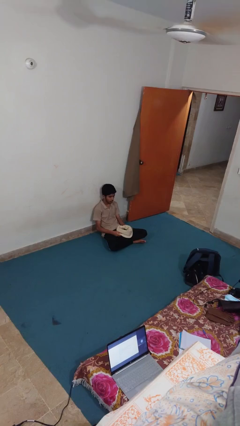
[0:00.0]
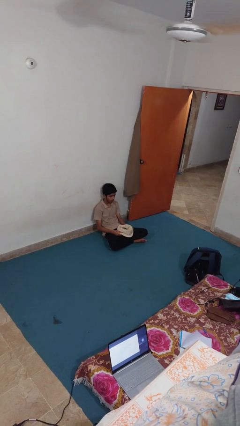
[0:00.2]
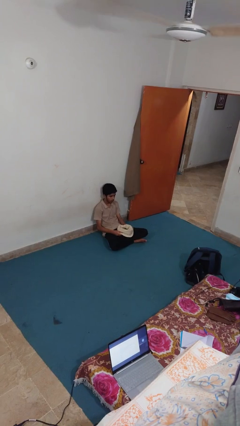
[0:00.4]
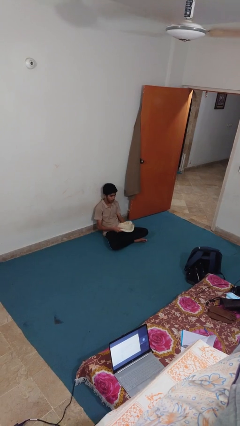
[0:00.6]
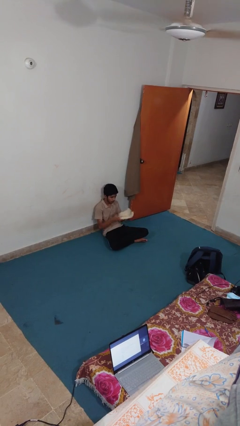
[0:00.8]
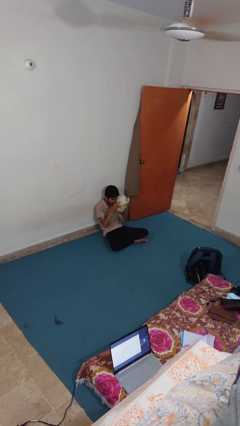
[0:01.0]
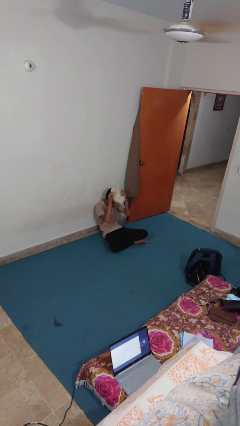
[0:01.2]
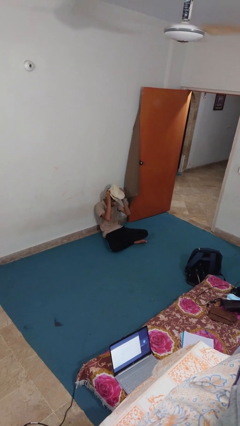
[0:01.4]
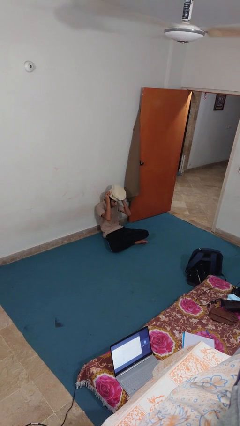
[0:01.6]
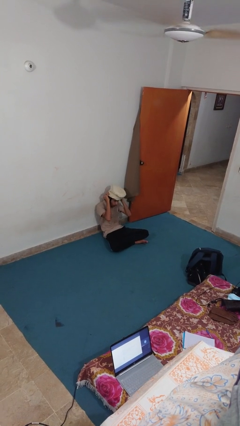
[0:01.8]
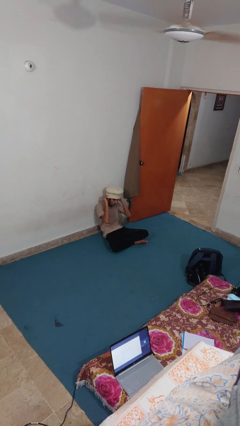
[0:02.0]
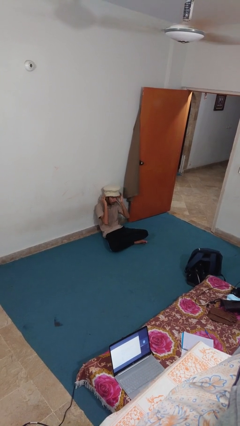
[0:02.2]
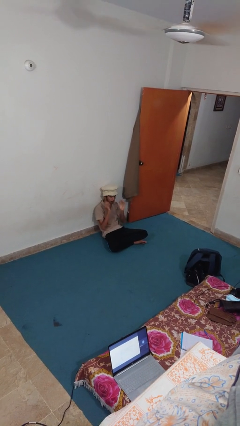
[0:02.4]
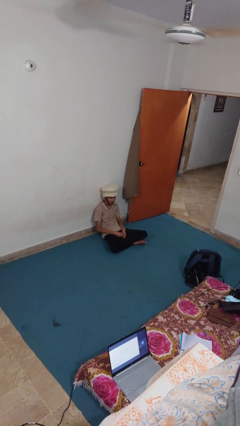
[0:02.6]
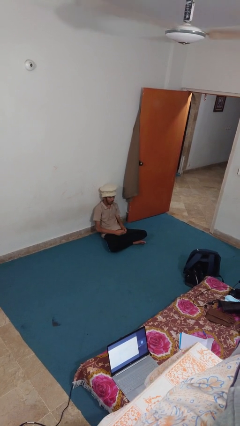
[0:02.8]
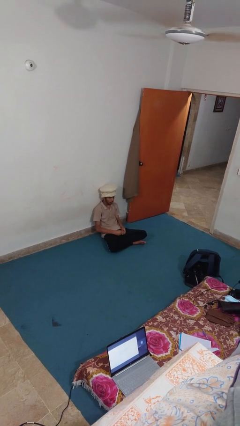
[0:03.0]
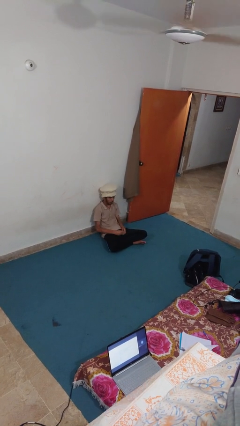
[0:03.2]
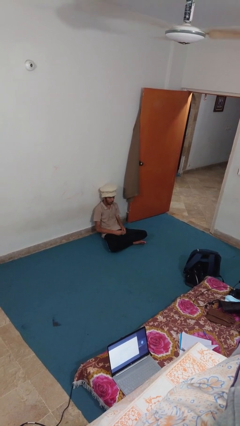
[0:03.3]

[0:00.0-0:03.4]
person puts on hat

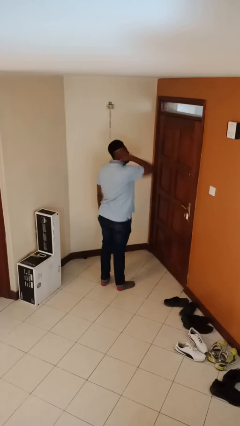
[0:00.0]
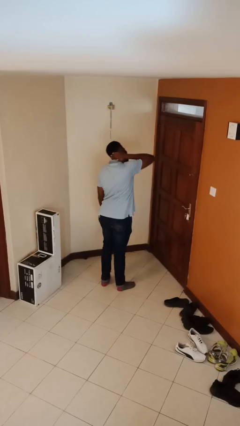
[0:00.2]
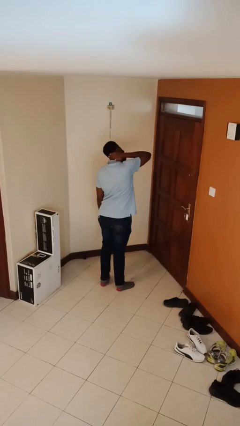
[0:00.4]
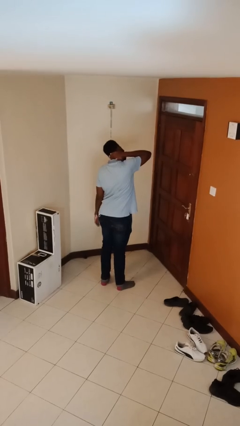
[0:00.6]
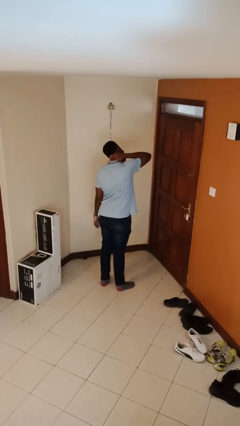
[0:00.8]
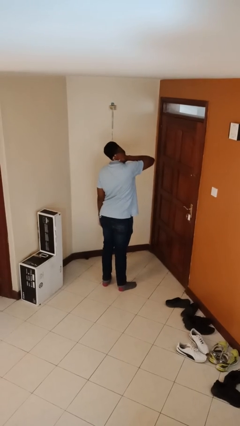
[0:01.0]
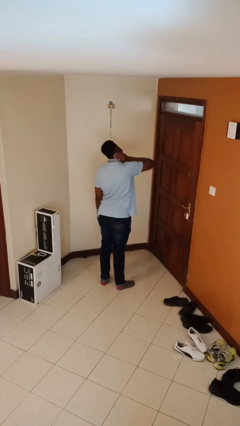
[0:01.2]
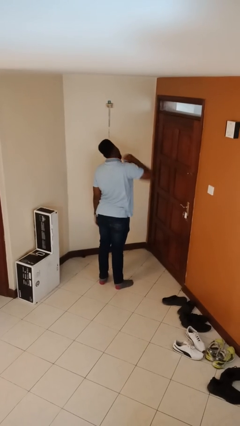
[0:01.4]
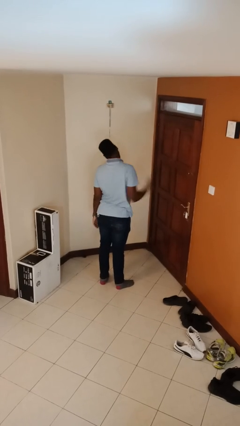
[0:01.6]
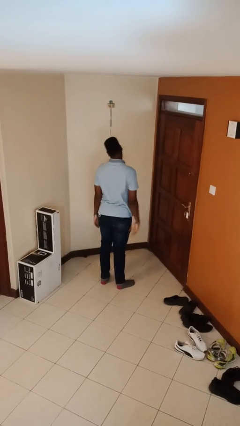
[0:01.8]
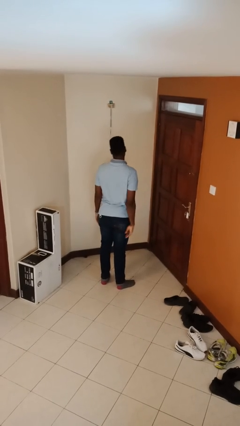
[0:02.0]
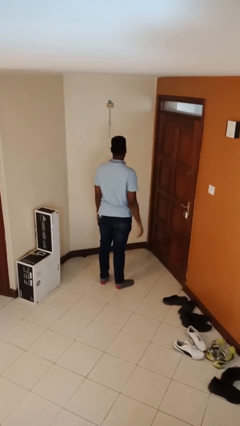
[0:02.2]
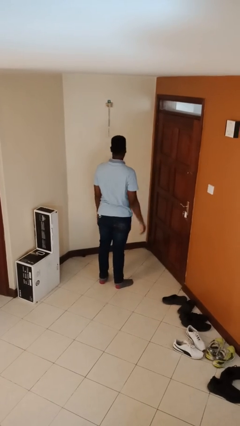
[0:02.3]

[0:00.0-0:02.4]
person swats bug

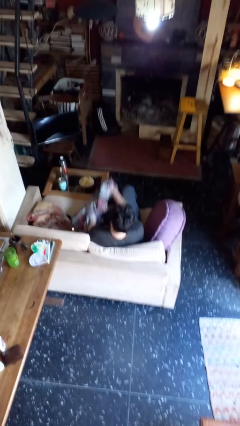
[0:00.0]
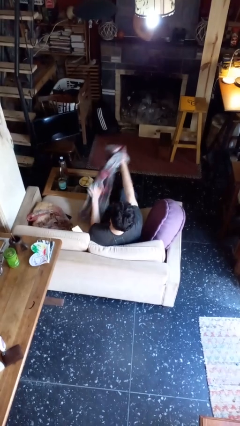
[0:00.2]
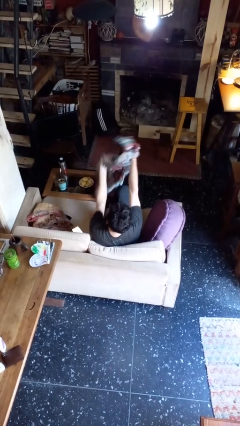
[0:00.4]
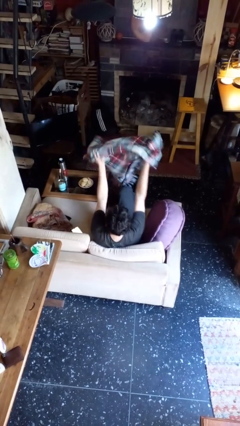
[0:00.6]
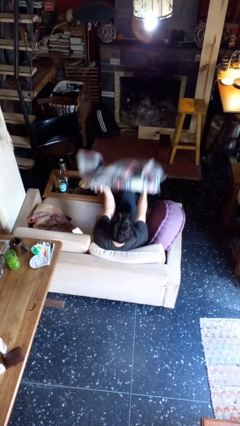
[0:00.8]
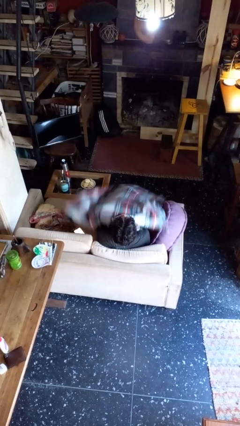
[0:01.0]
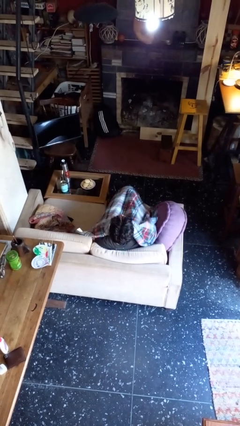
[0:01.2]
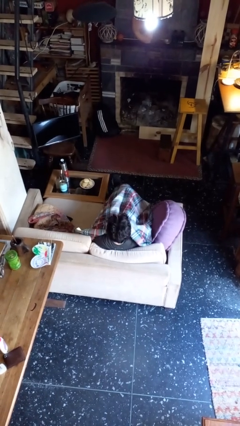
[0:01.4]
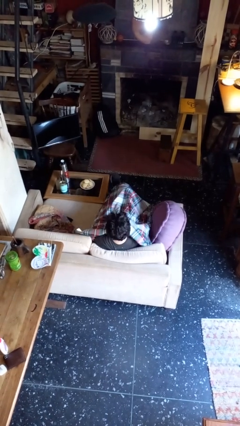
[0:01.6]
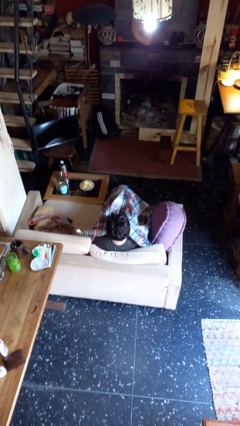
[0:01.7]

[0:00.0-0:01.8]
person covers with blanket

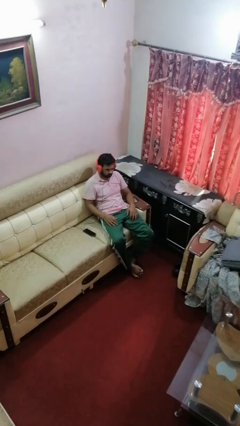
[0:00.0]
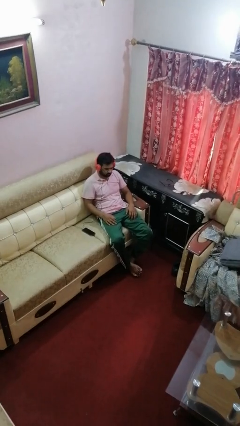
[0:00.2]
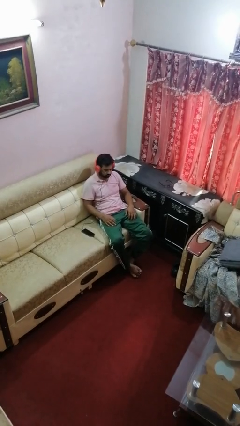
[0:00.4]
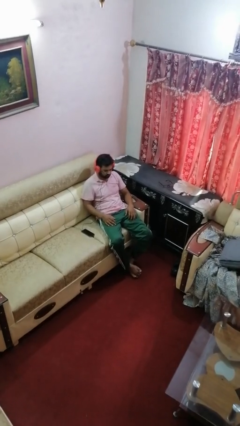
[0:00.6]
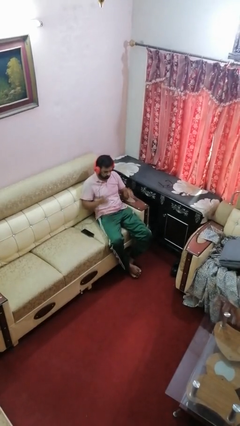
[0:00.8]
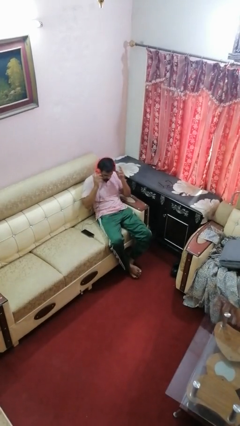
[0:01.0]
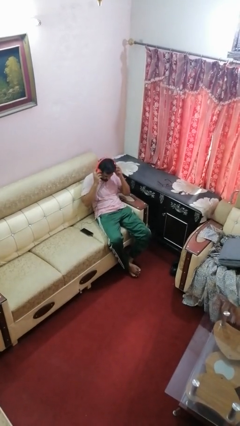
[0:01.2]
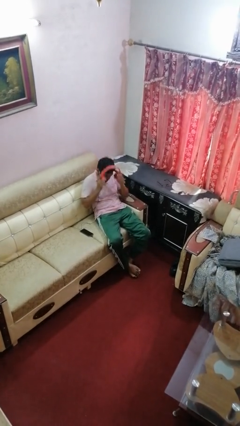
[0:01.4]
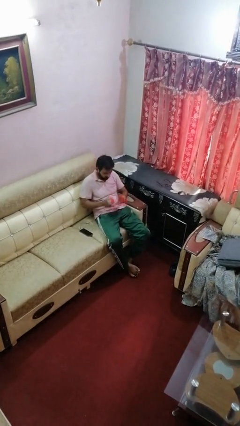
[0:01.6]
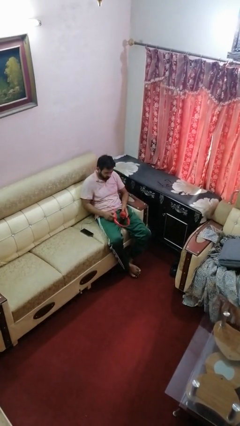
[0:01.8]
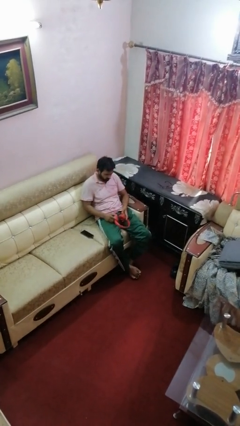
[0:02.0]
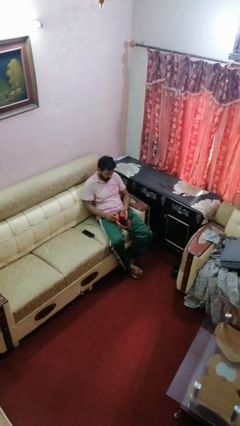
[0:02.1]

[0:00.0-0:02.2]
person takes off headphones

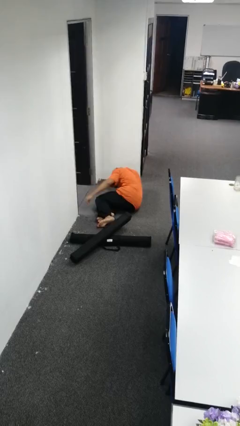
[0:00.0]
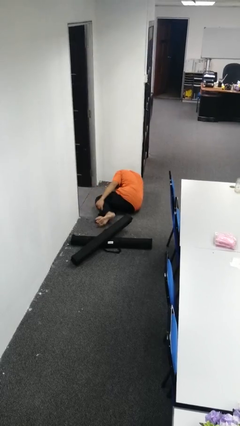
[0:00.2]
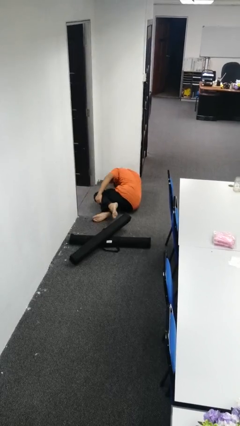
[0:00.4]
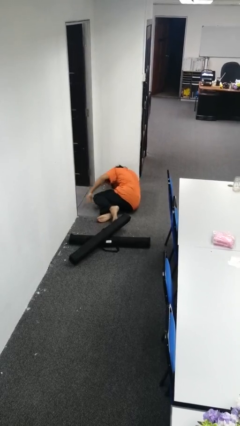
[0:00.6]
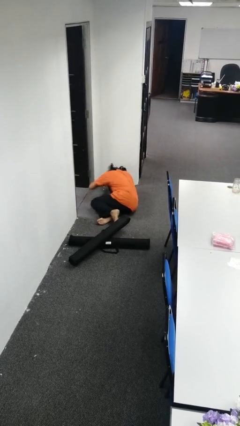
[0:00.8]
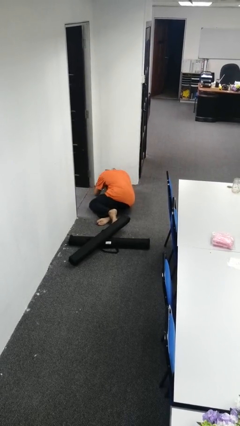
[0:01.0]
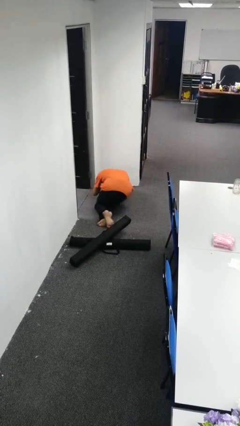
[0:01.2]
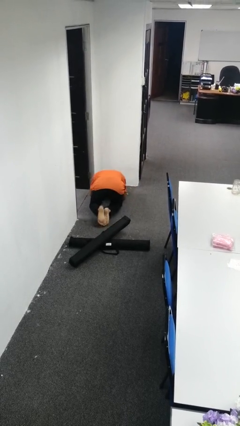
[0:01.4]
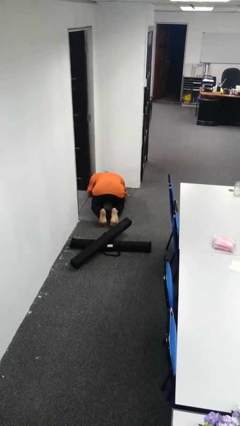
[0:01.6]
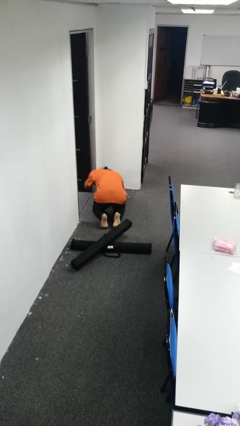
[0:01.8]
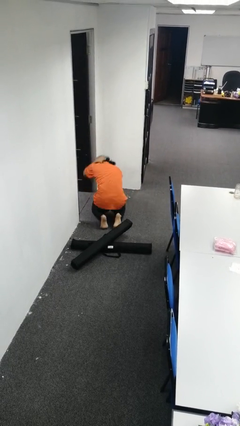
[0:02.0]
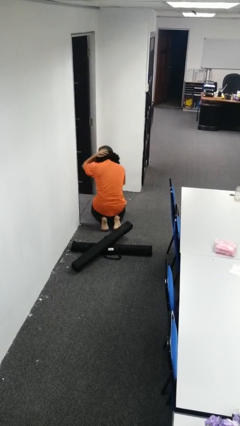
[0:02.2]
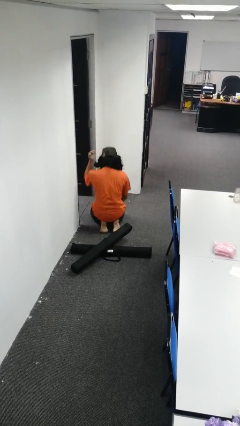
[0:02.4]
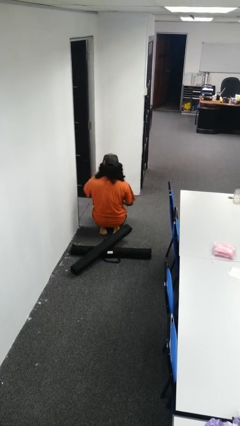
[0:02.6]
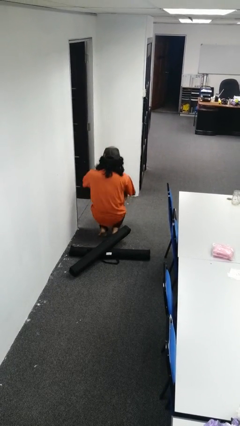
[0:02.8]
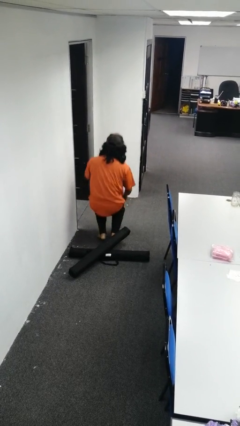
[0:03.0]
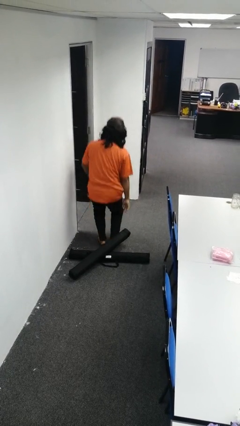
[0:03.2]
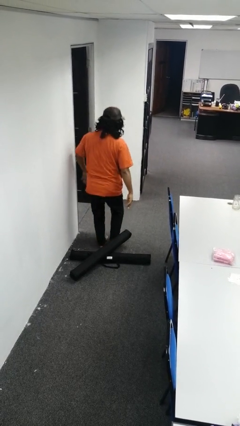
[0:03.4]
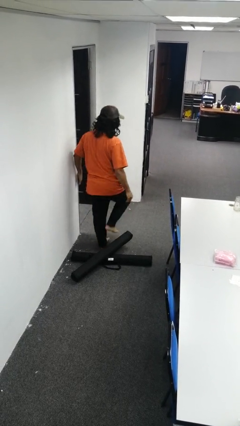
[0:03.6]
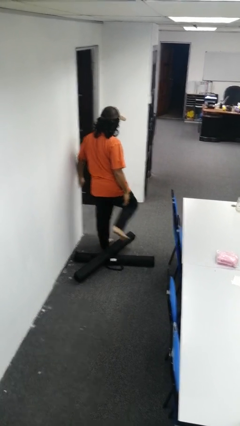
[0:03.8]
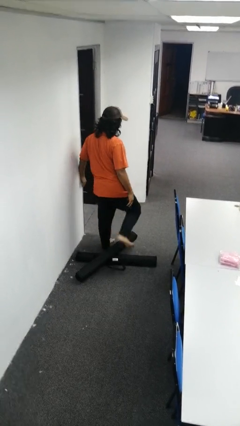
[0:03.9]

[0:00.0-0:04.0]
person stands up from floor

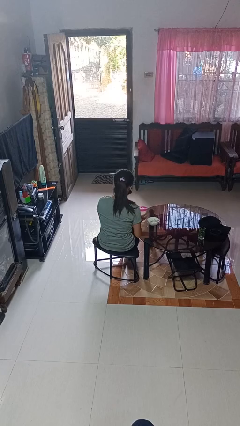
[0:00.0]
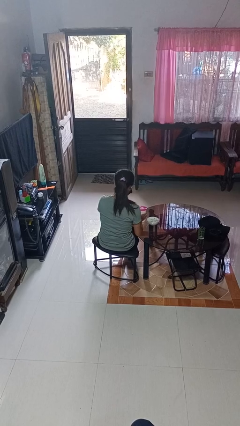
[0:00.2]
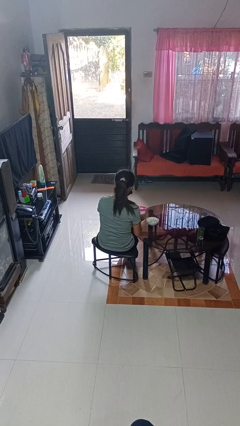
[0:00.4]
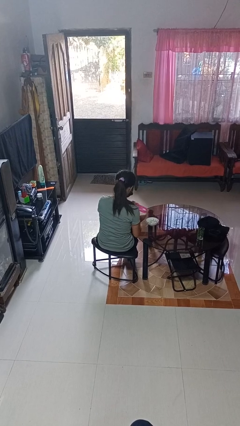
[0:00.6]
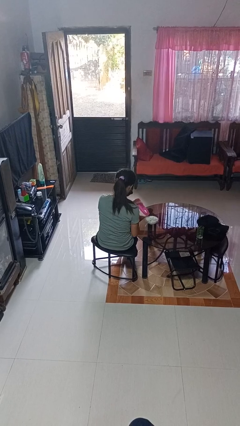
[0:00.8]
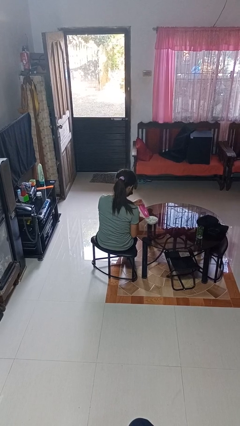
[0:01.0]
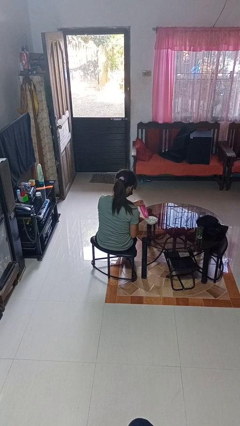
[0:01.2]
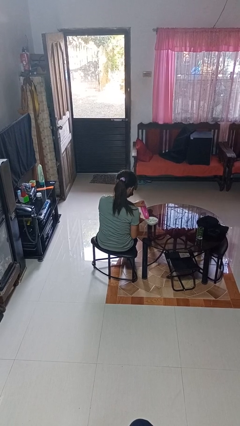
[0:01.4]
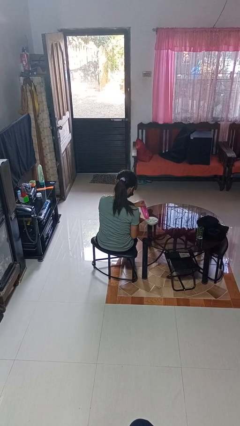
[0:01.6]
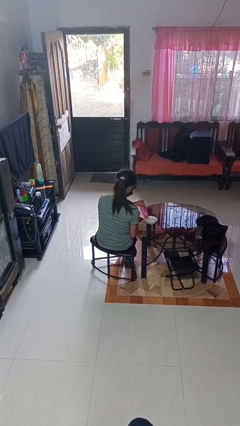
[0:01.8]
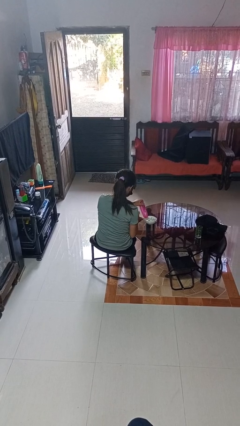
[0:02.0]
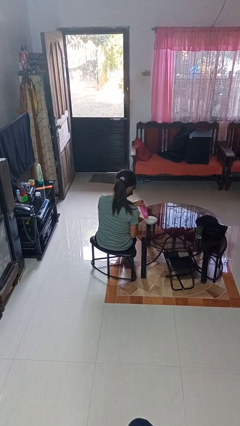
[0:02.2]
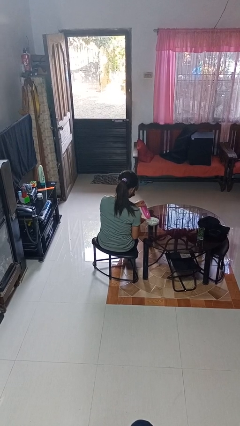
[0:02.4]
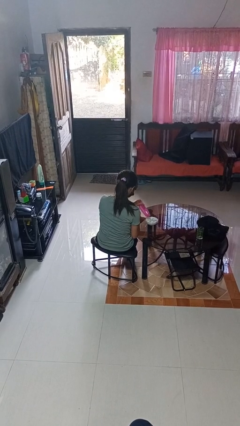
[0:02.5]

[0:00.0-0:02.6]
person pours into bowl

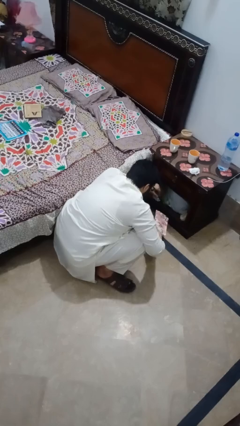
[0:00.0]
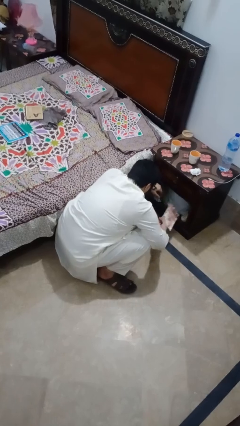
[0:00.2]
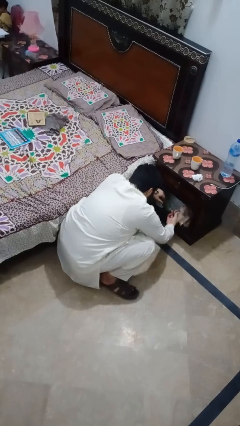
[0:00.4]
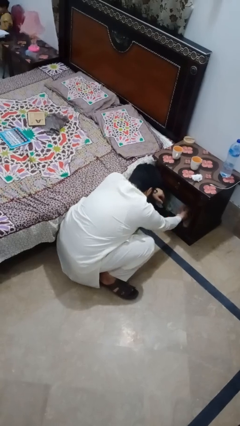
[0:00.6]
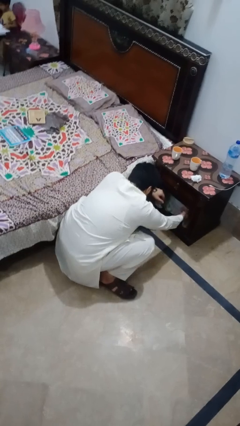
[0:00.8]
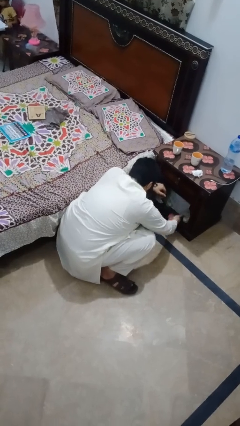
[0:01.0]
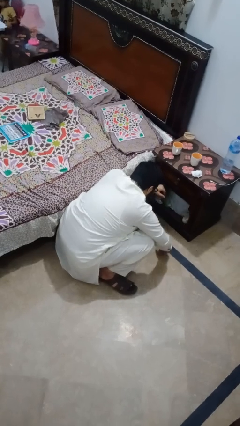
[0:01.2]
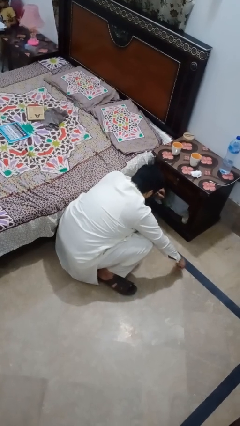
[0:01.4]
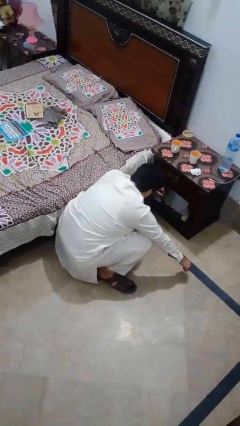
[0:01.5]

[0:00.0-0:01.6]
person puts down object into cabinet
